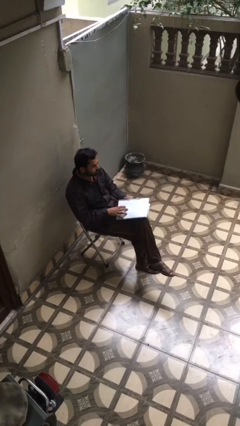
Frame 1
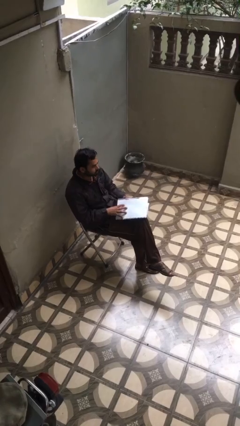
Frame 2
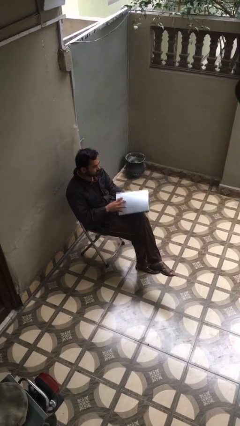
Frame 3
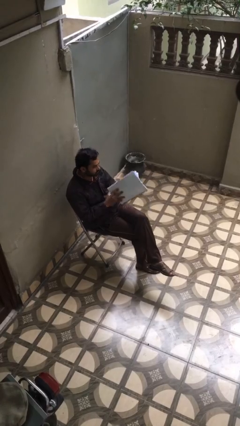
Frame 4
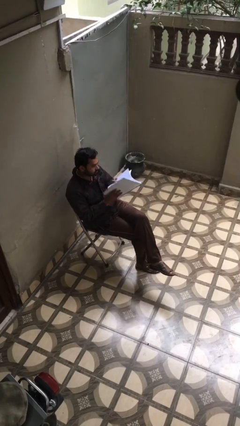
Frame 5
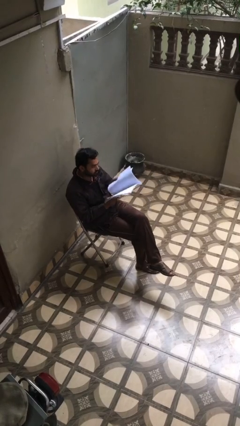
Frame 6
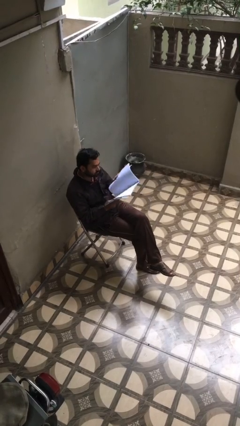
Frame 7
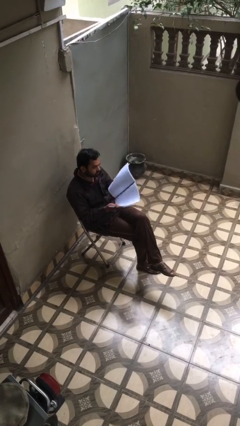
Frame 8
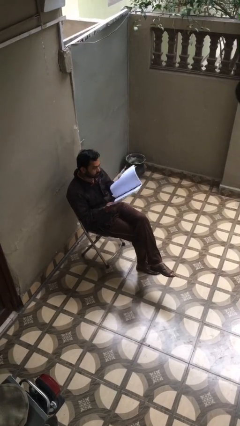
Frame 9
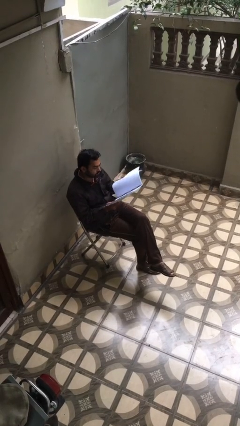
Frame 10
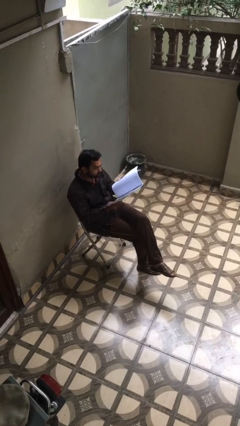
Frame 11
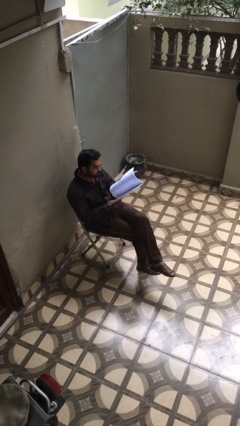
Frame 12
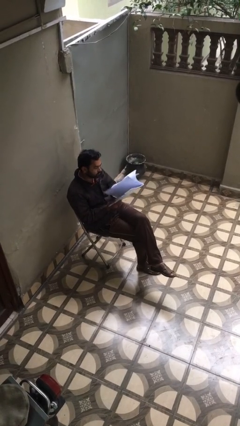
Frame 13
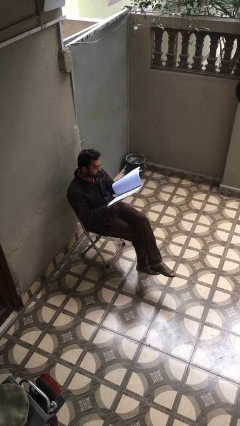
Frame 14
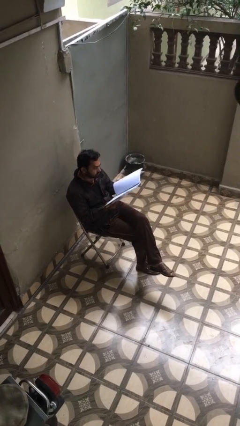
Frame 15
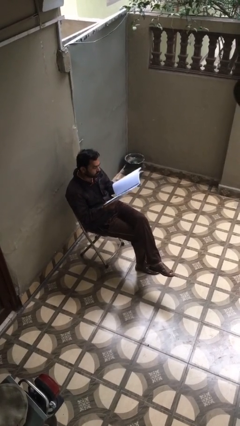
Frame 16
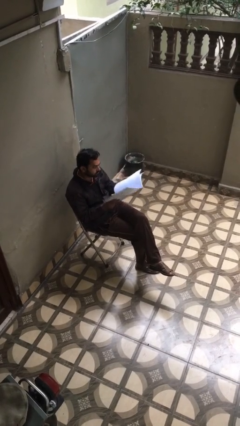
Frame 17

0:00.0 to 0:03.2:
person reads document

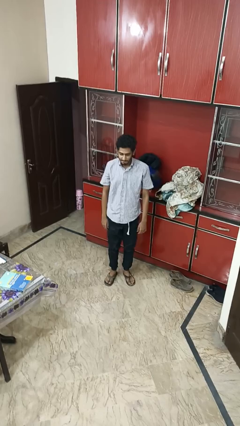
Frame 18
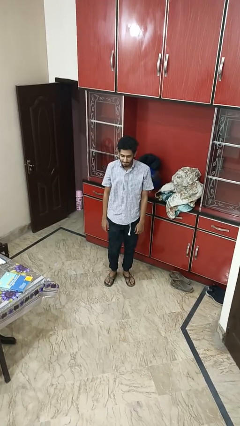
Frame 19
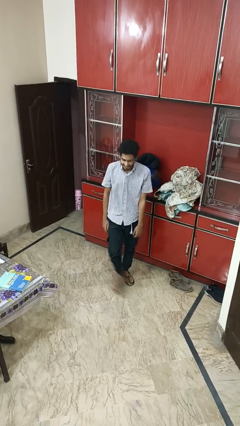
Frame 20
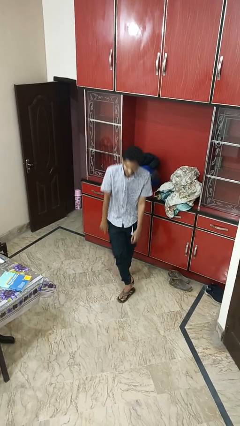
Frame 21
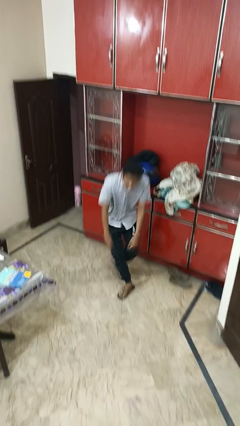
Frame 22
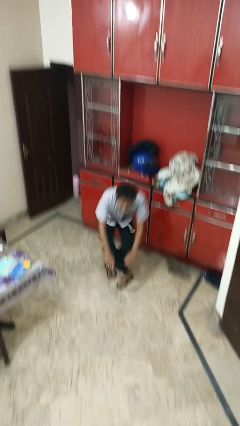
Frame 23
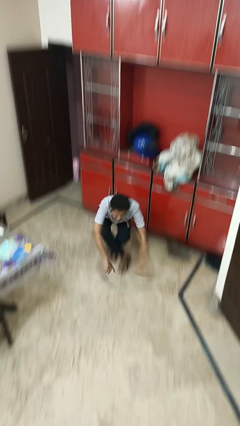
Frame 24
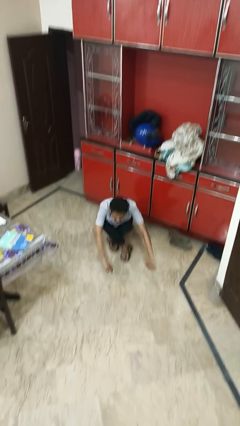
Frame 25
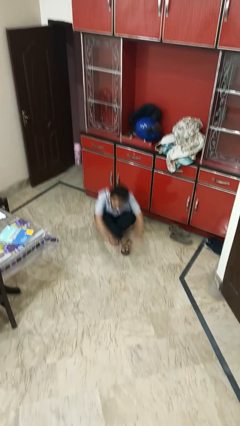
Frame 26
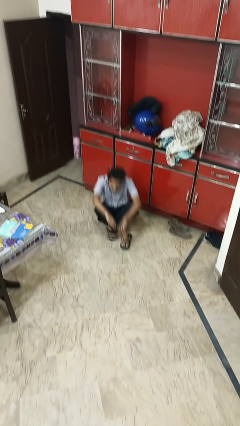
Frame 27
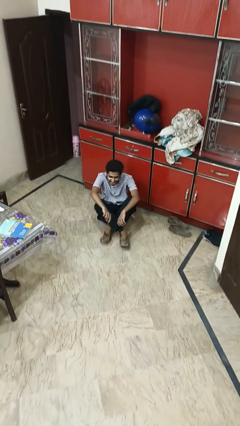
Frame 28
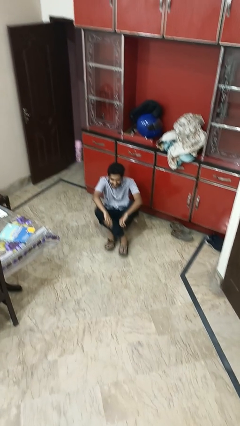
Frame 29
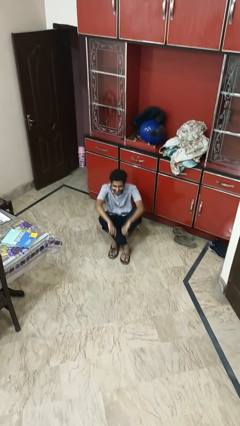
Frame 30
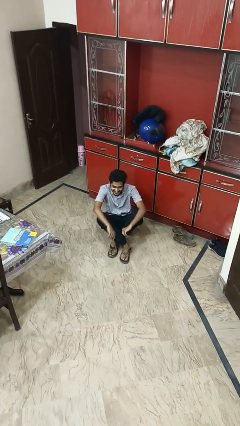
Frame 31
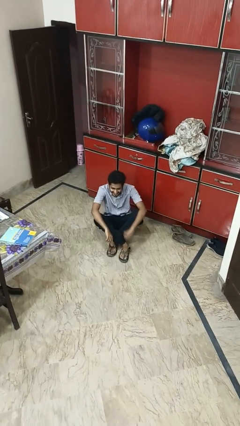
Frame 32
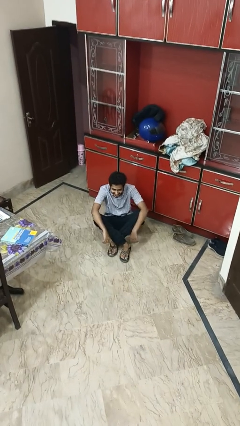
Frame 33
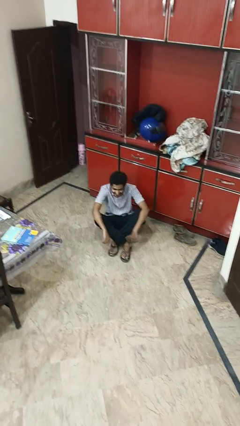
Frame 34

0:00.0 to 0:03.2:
person sits crisscross

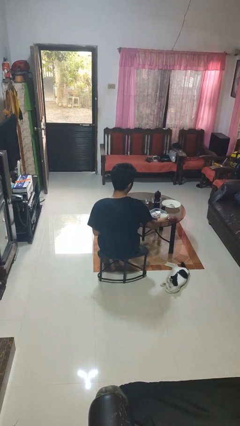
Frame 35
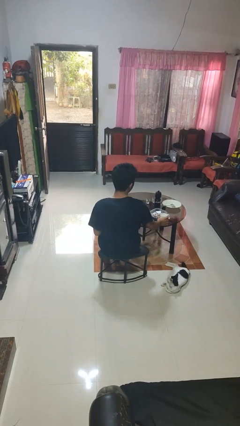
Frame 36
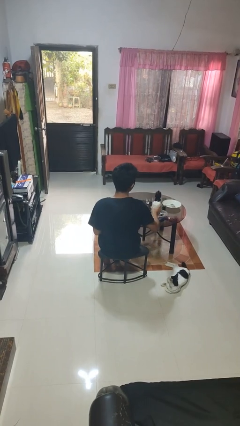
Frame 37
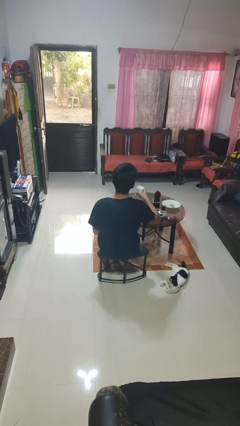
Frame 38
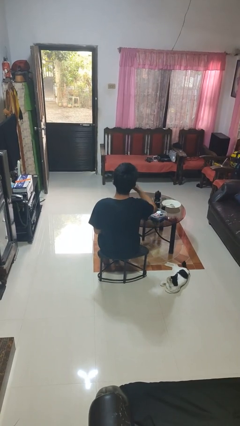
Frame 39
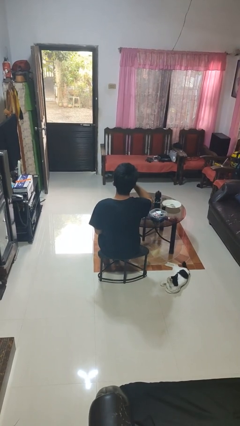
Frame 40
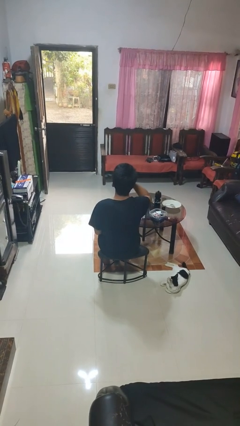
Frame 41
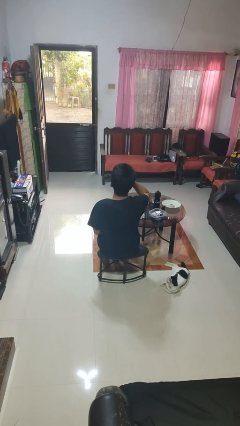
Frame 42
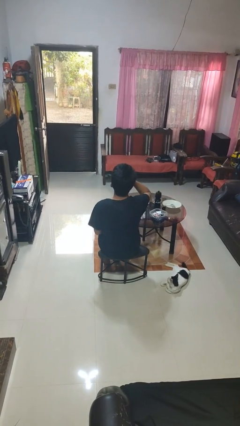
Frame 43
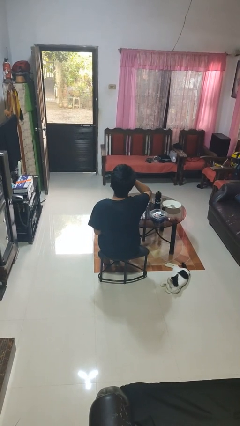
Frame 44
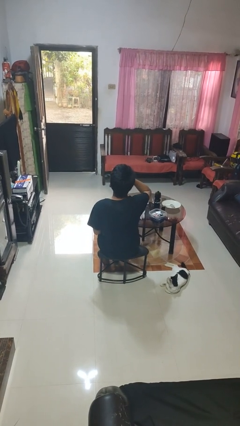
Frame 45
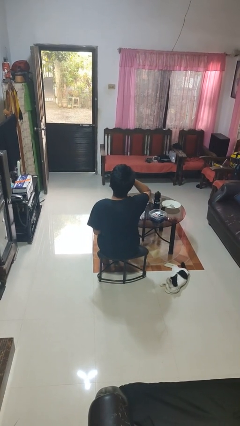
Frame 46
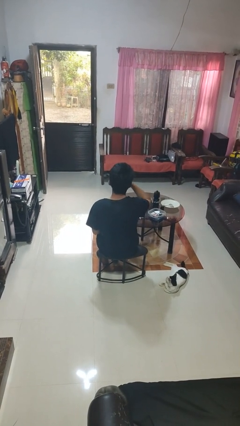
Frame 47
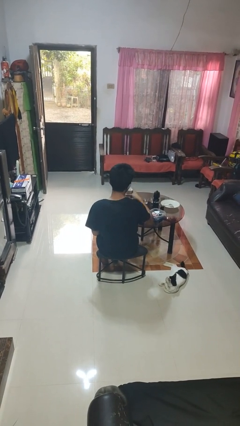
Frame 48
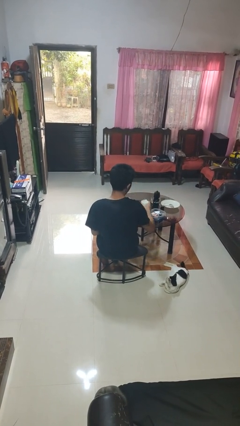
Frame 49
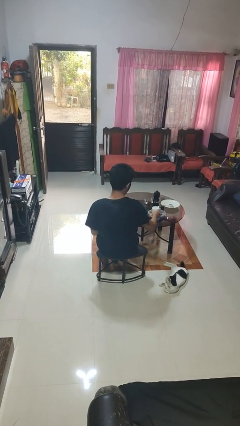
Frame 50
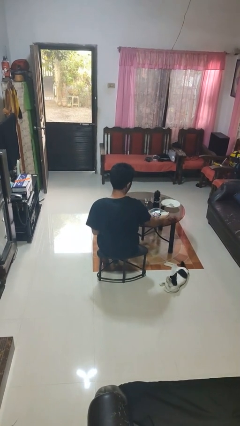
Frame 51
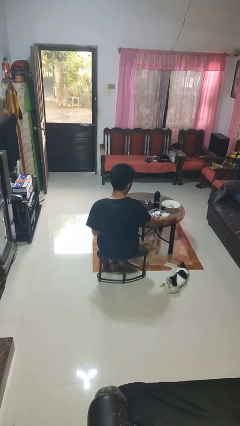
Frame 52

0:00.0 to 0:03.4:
person drinks from cup

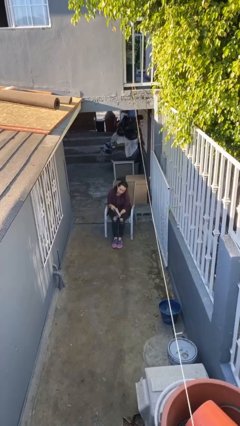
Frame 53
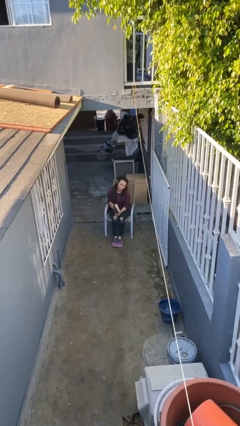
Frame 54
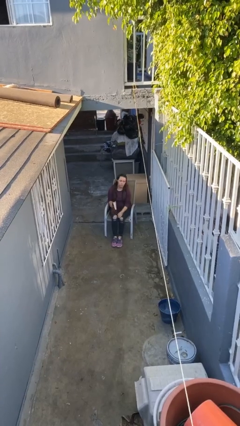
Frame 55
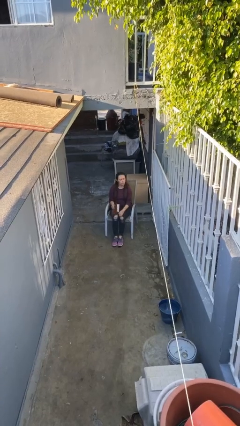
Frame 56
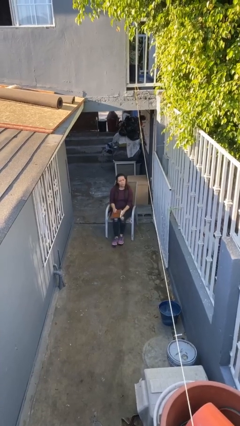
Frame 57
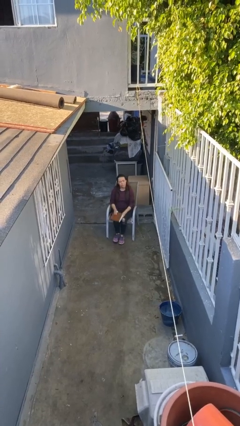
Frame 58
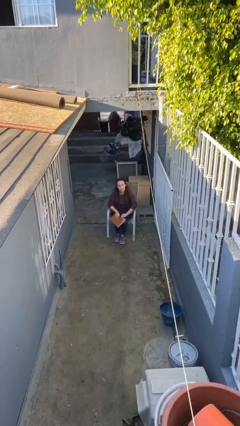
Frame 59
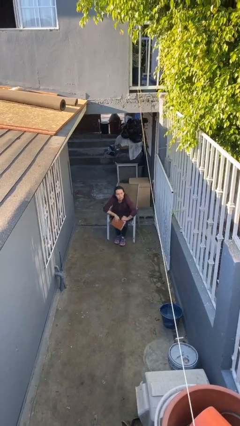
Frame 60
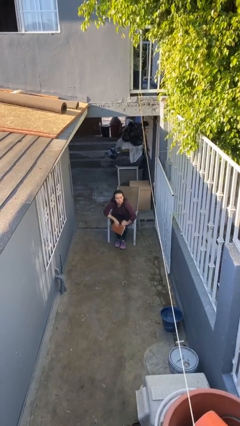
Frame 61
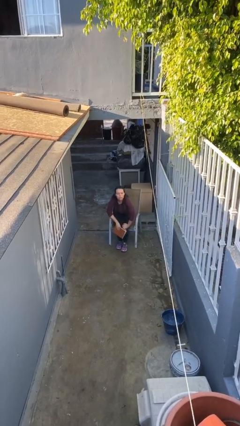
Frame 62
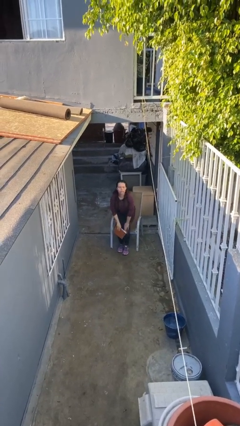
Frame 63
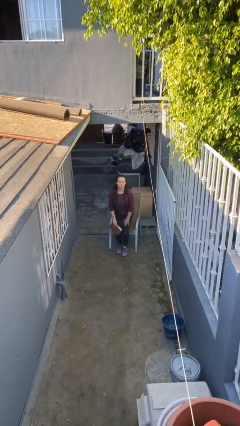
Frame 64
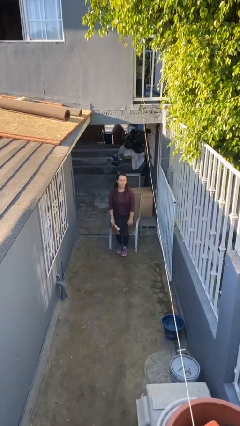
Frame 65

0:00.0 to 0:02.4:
person stands up

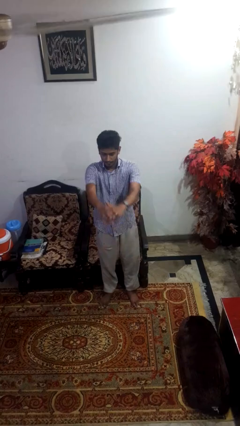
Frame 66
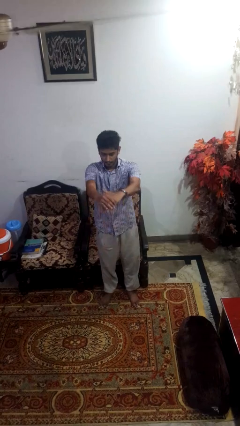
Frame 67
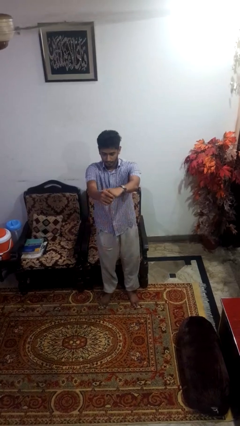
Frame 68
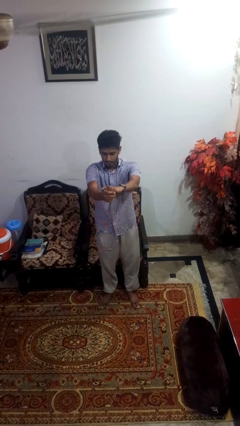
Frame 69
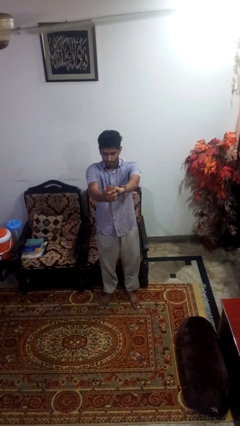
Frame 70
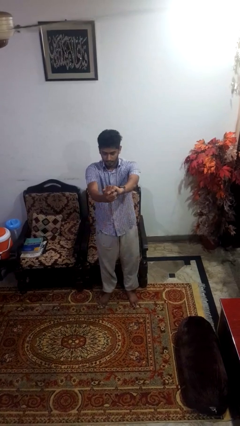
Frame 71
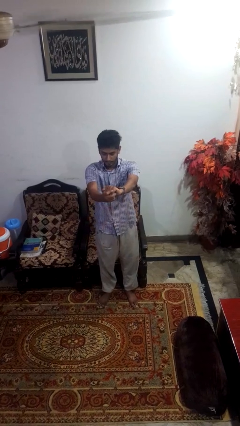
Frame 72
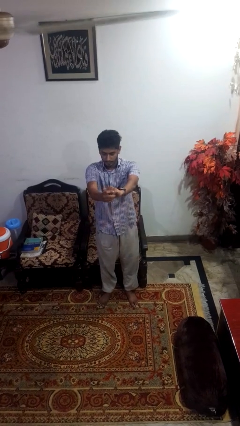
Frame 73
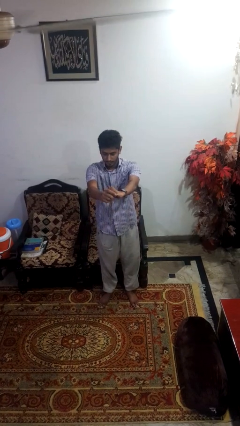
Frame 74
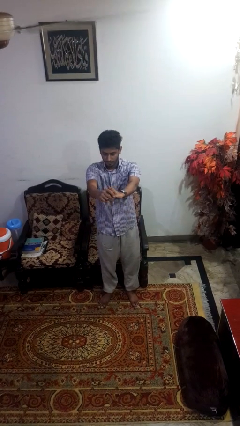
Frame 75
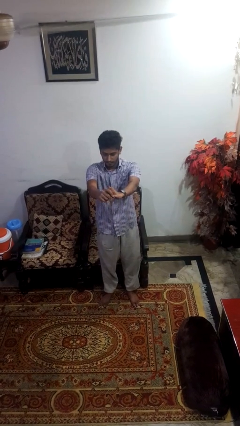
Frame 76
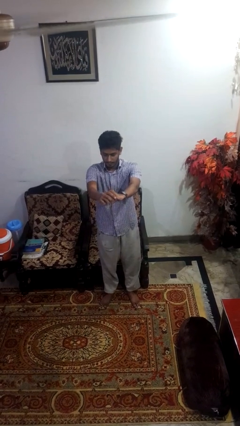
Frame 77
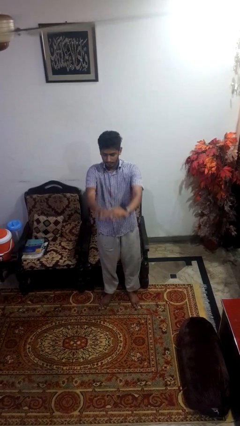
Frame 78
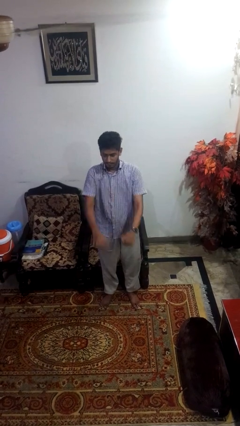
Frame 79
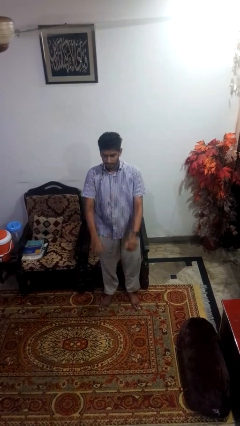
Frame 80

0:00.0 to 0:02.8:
person cracks knuckles

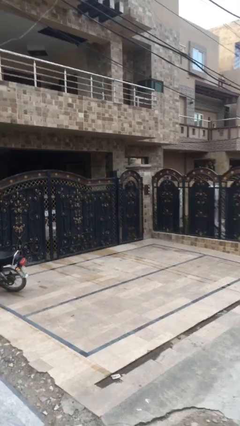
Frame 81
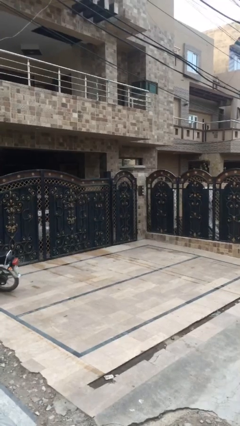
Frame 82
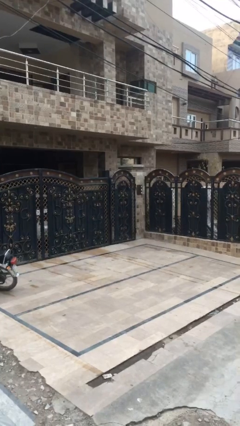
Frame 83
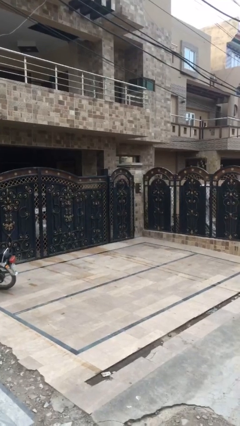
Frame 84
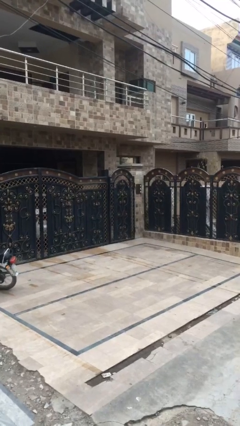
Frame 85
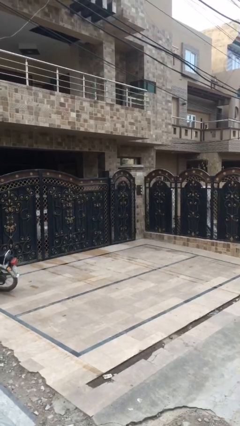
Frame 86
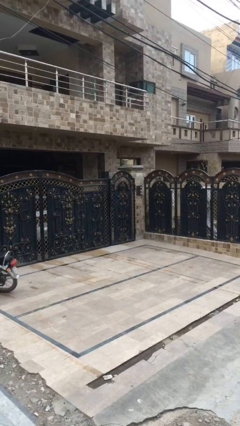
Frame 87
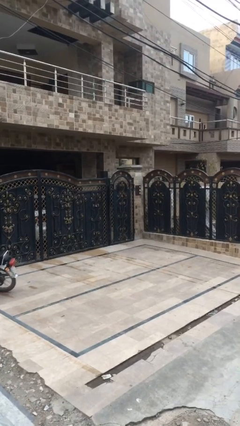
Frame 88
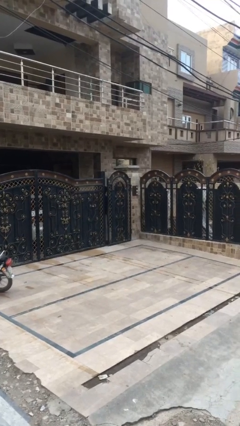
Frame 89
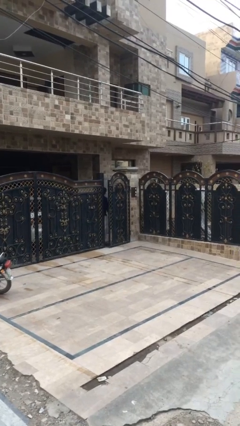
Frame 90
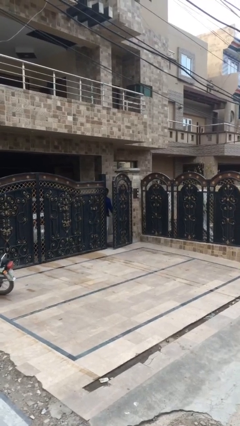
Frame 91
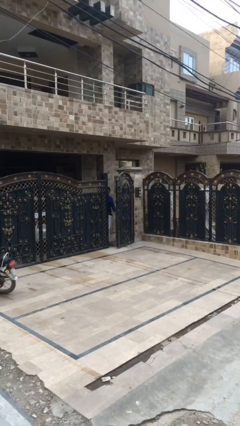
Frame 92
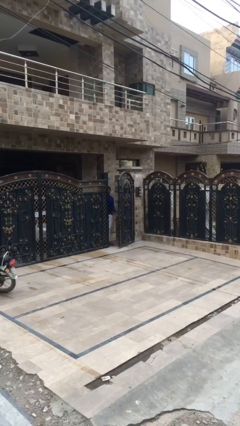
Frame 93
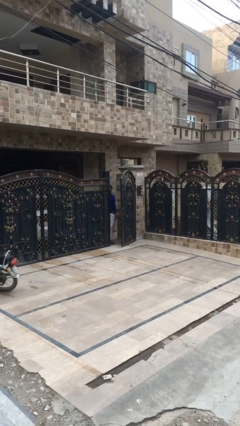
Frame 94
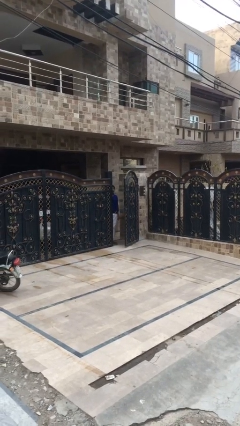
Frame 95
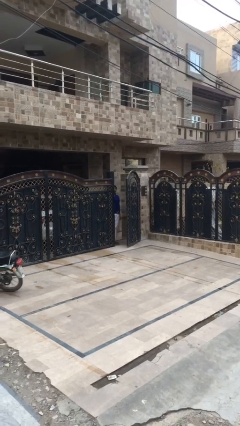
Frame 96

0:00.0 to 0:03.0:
person opens facility door
